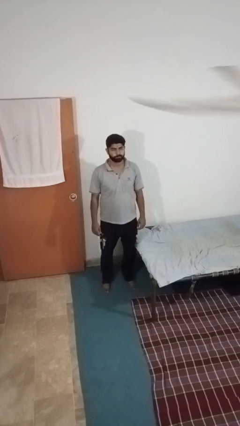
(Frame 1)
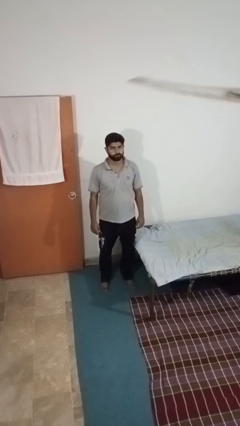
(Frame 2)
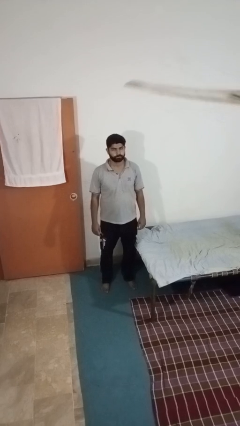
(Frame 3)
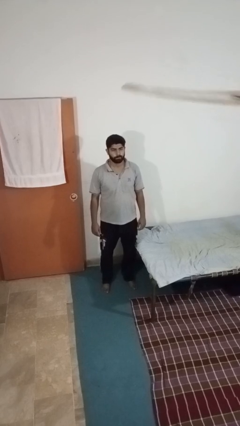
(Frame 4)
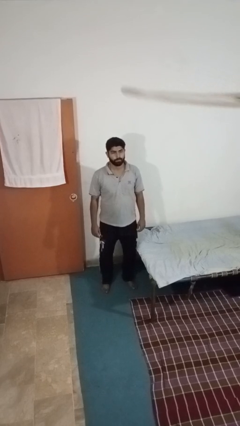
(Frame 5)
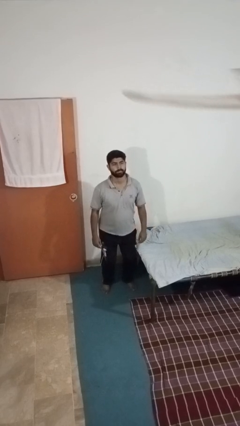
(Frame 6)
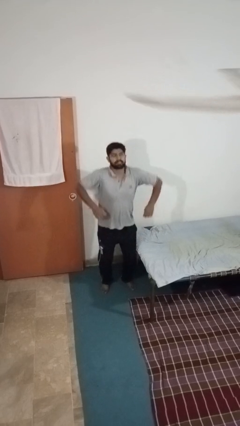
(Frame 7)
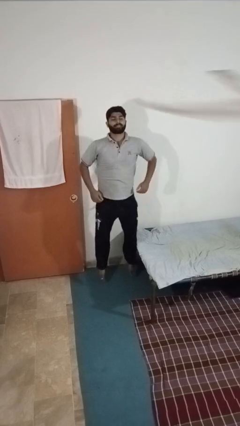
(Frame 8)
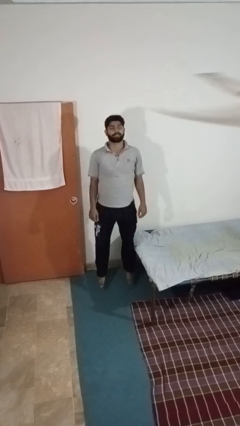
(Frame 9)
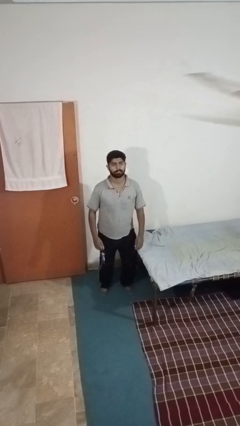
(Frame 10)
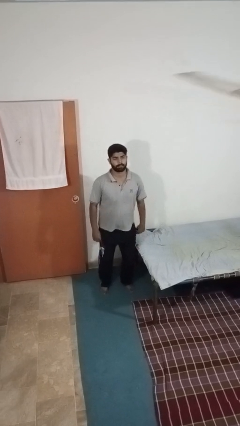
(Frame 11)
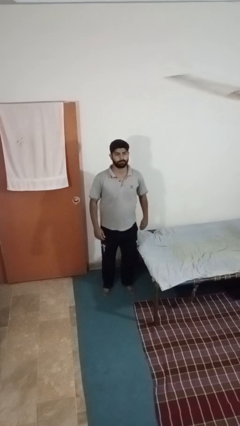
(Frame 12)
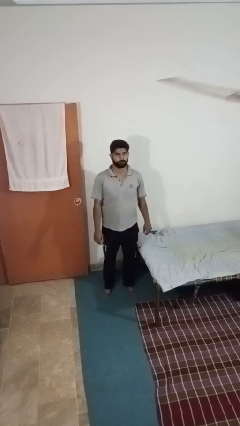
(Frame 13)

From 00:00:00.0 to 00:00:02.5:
person jumps

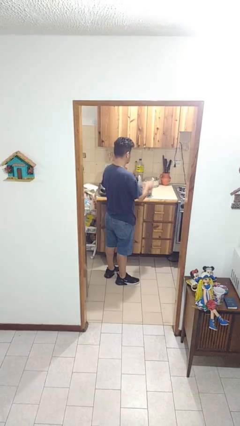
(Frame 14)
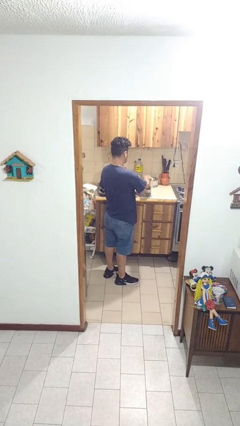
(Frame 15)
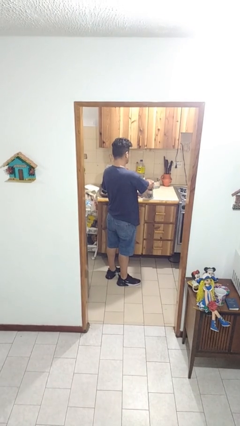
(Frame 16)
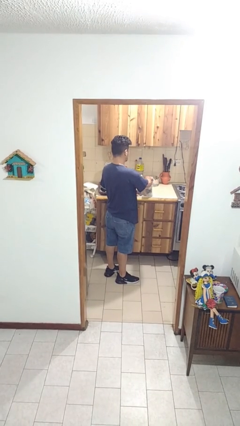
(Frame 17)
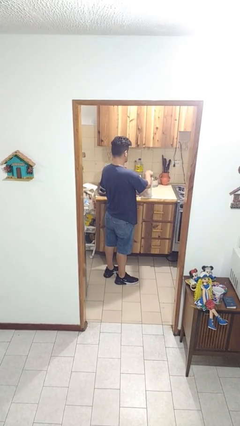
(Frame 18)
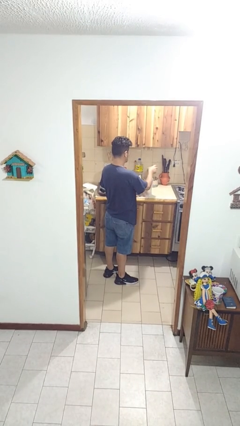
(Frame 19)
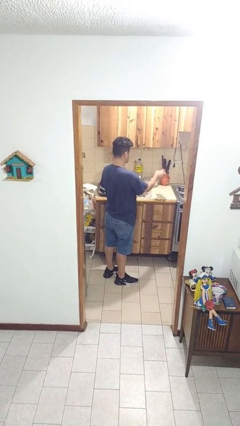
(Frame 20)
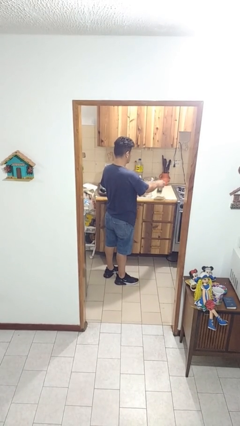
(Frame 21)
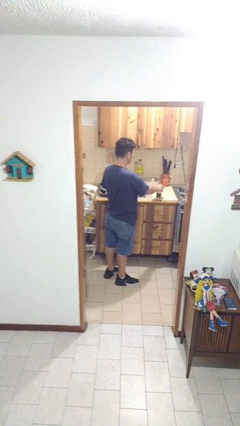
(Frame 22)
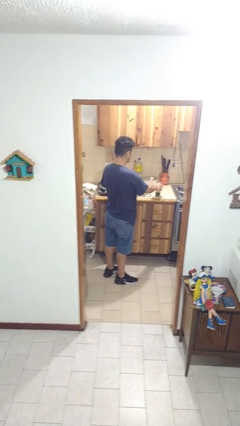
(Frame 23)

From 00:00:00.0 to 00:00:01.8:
person takes object from bag

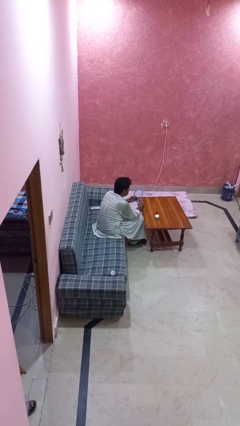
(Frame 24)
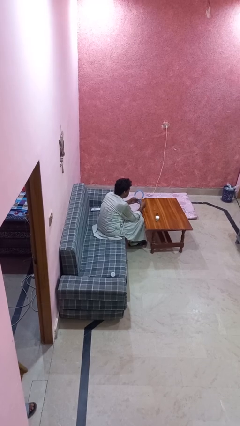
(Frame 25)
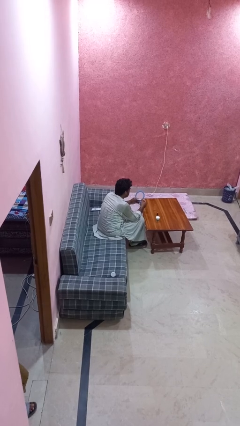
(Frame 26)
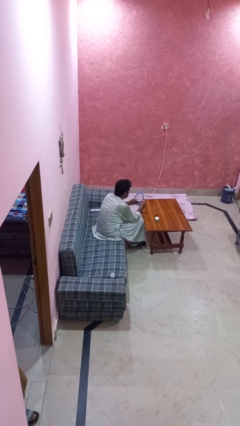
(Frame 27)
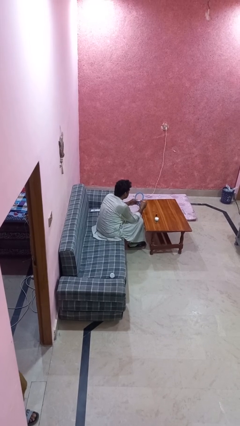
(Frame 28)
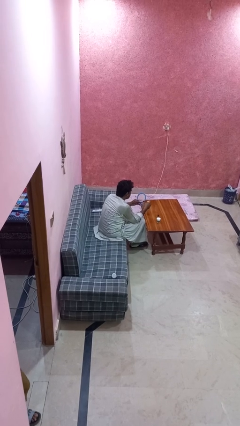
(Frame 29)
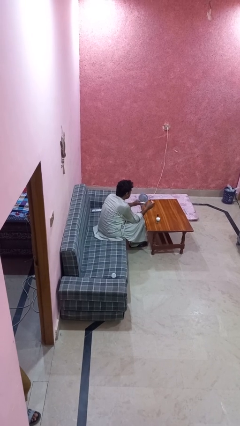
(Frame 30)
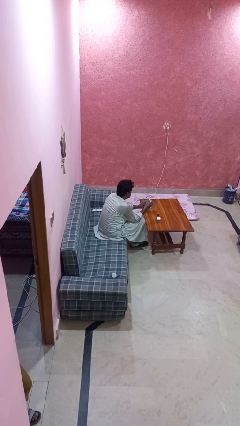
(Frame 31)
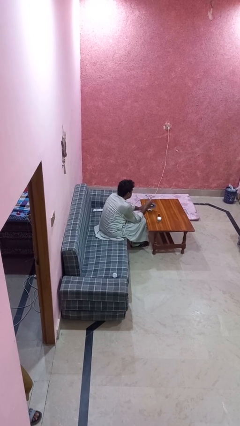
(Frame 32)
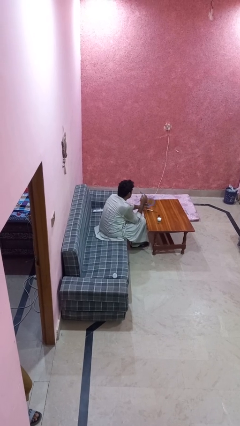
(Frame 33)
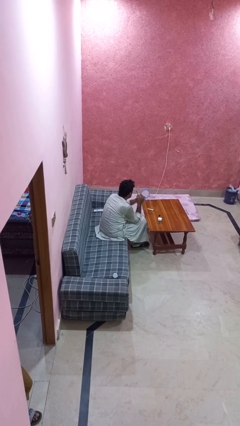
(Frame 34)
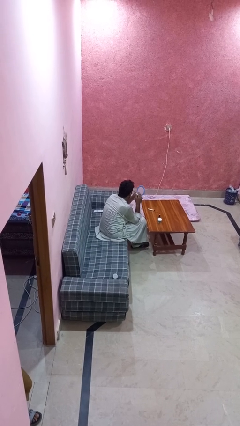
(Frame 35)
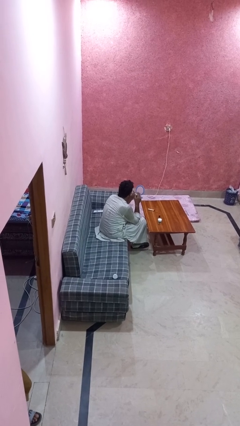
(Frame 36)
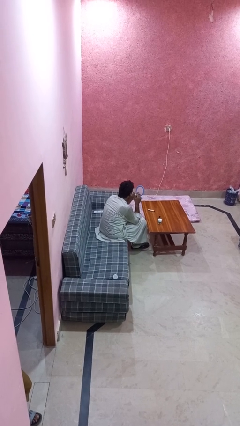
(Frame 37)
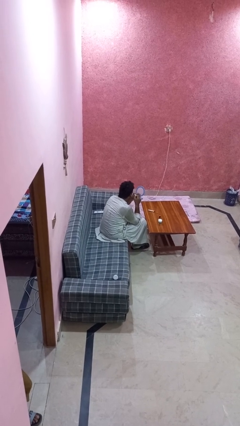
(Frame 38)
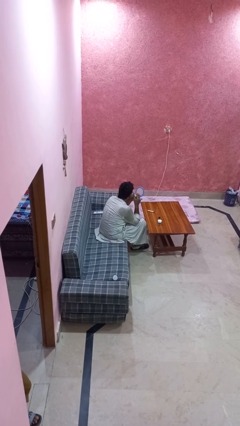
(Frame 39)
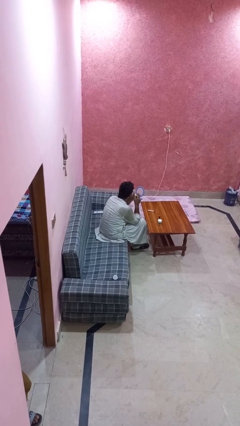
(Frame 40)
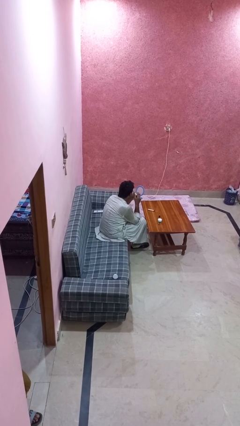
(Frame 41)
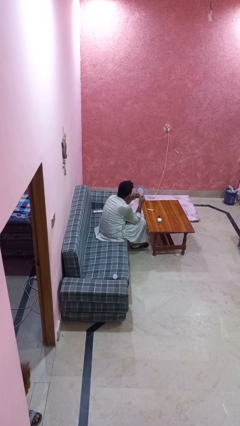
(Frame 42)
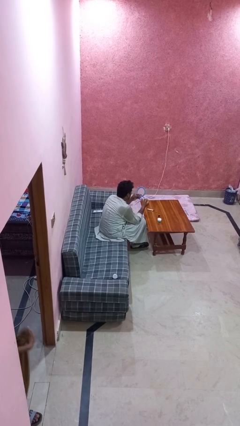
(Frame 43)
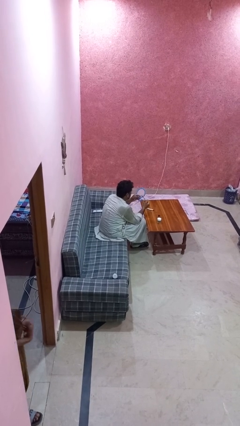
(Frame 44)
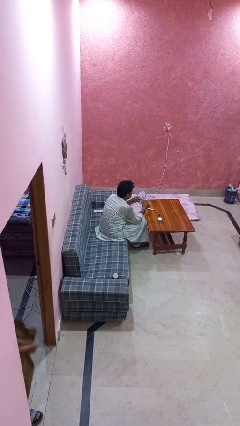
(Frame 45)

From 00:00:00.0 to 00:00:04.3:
person applies eye makeup

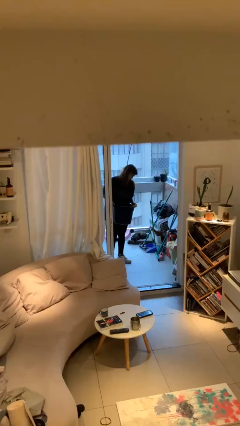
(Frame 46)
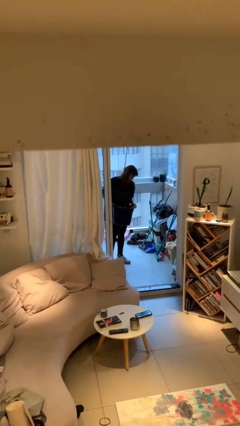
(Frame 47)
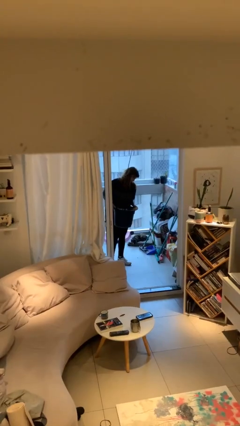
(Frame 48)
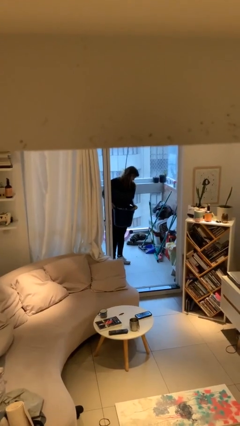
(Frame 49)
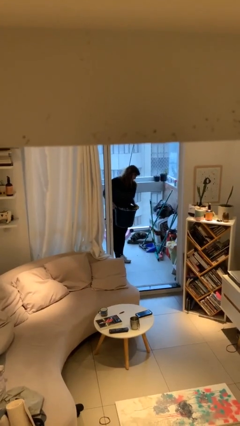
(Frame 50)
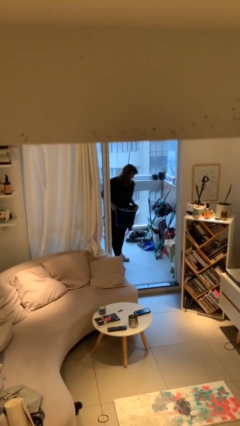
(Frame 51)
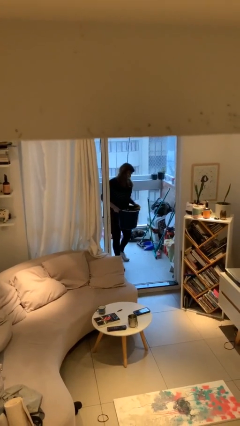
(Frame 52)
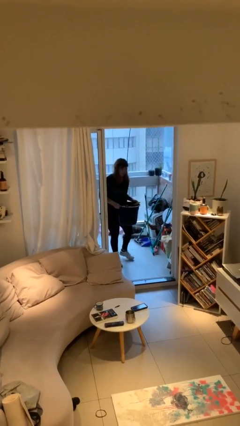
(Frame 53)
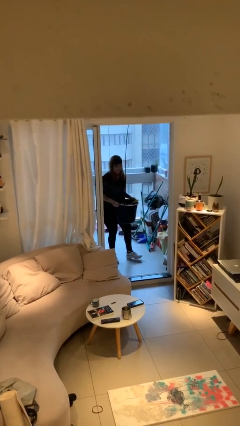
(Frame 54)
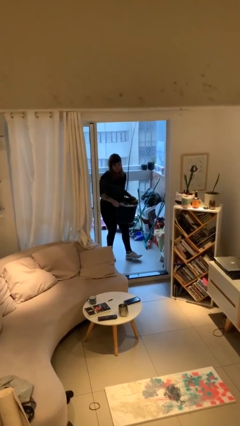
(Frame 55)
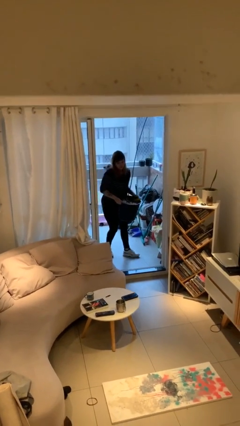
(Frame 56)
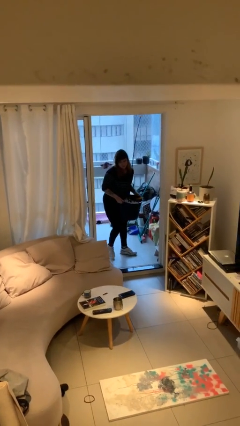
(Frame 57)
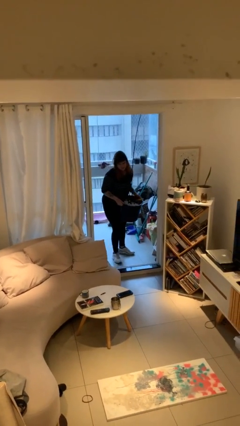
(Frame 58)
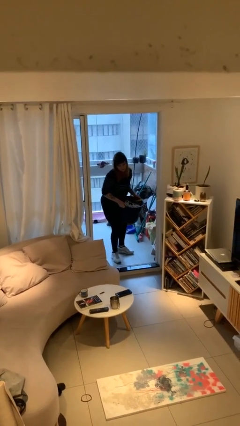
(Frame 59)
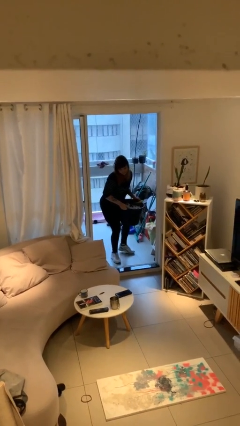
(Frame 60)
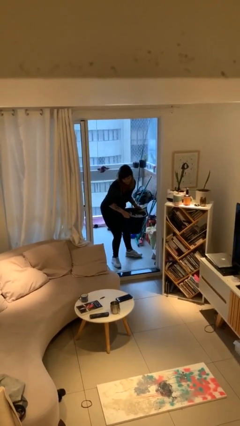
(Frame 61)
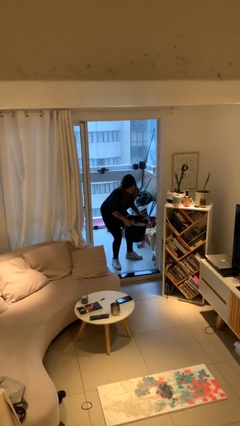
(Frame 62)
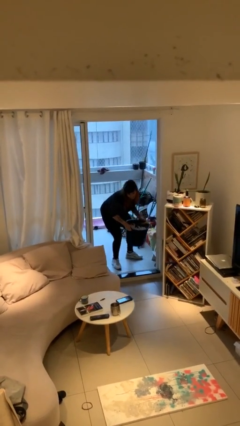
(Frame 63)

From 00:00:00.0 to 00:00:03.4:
person carries heavy object

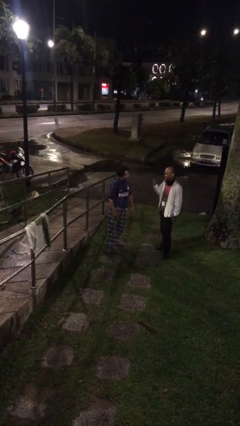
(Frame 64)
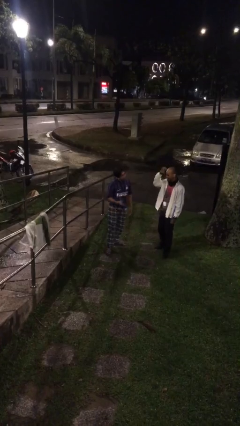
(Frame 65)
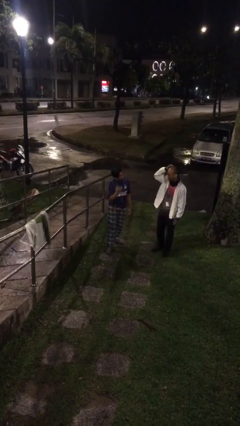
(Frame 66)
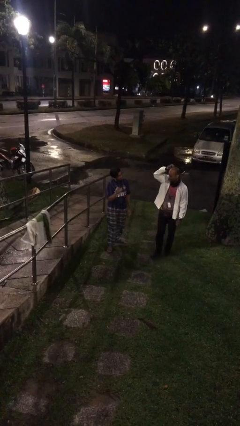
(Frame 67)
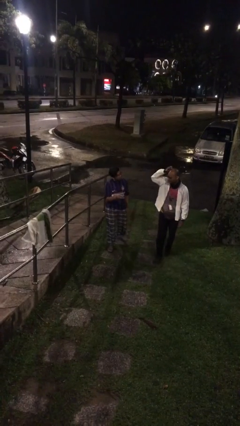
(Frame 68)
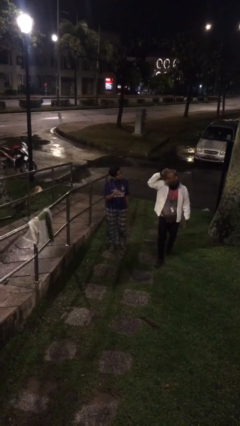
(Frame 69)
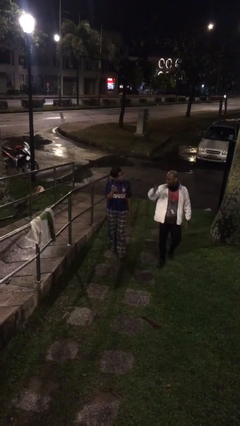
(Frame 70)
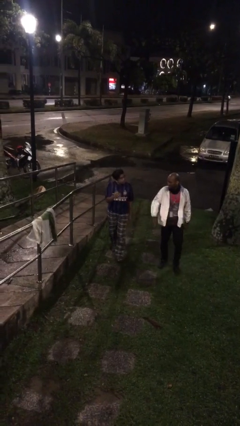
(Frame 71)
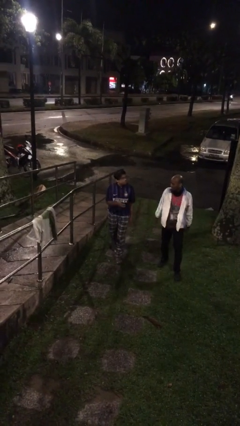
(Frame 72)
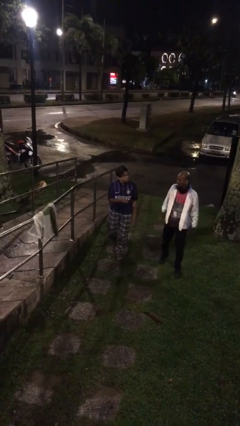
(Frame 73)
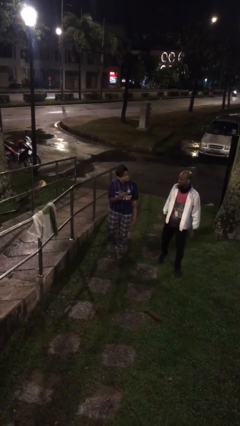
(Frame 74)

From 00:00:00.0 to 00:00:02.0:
person talks to person

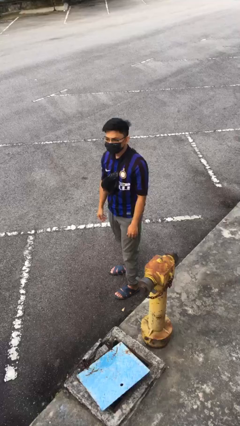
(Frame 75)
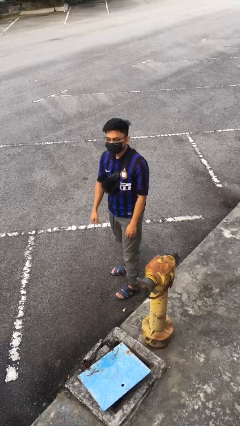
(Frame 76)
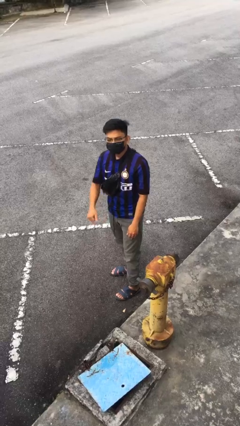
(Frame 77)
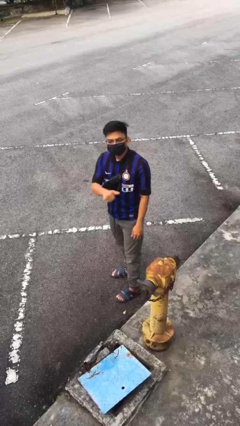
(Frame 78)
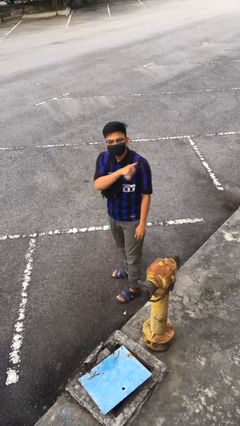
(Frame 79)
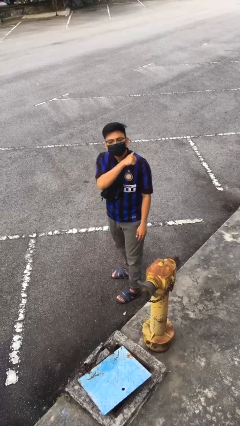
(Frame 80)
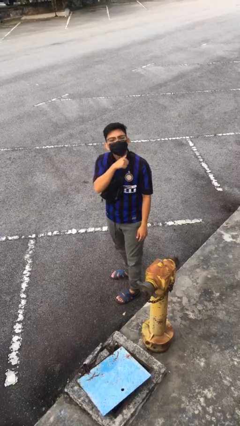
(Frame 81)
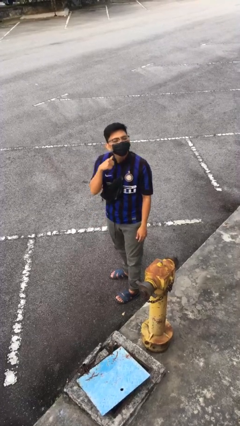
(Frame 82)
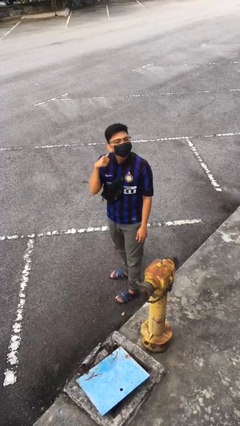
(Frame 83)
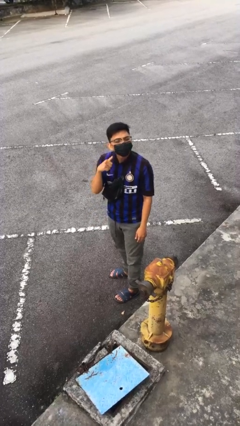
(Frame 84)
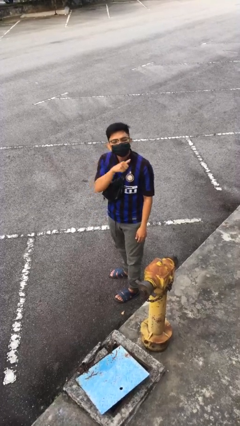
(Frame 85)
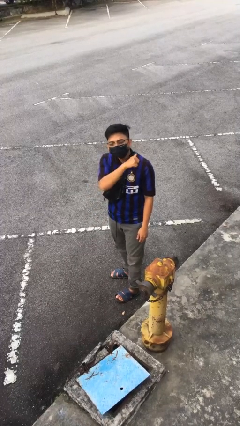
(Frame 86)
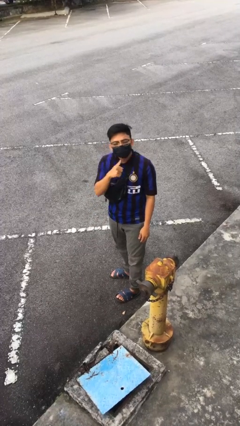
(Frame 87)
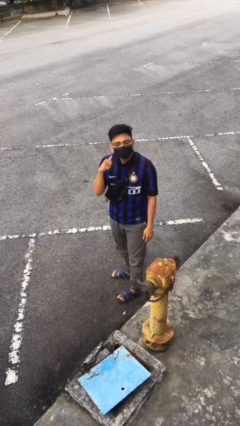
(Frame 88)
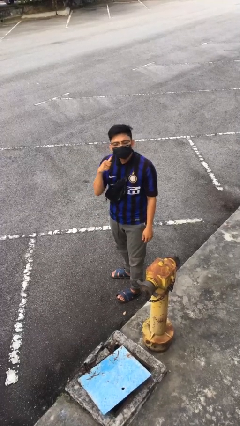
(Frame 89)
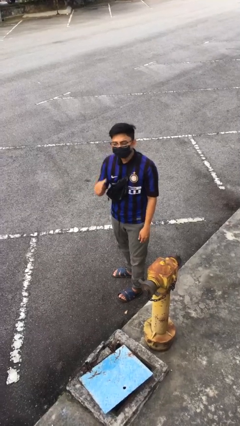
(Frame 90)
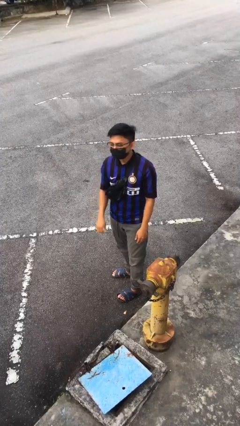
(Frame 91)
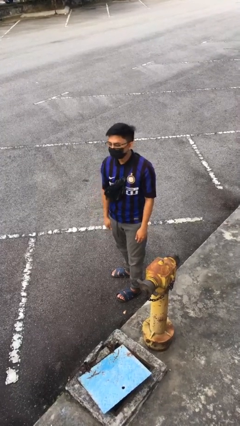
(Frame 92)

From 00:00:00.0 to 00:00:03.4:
person gestures cut
